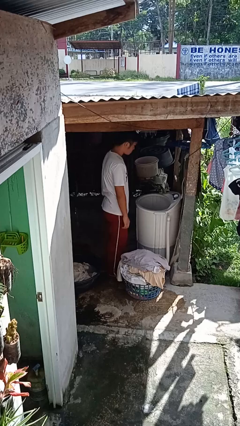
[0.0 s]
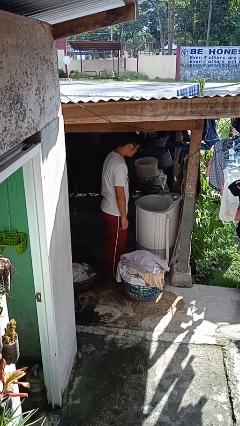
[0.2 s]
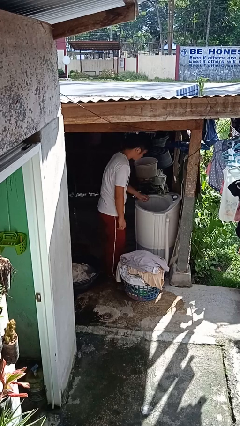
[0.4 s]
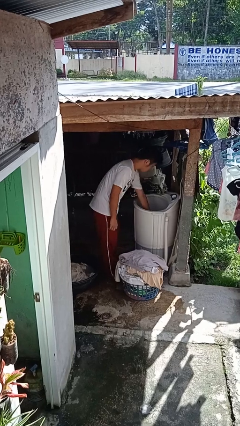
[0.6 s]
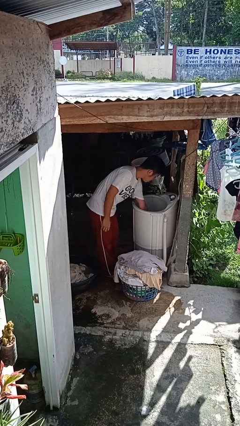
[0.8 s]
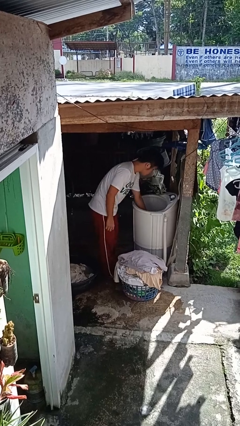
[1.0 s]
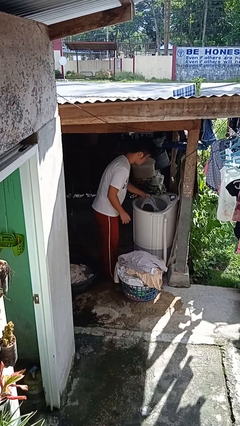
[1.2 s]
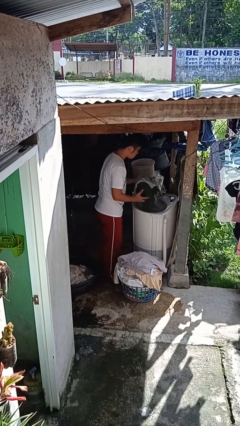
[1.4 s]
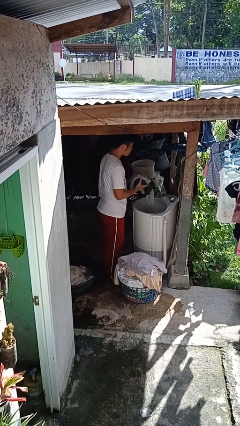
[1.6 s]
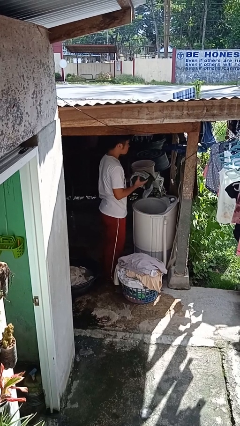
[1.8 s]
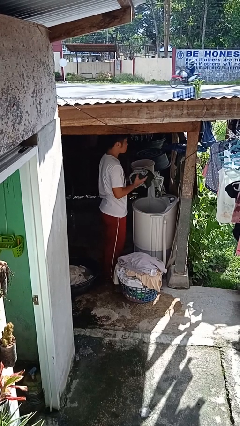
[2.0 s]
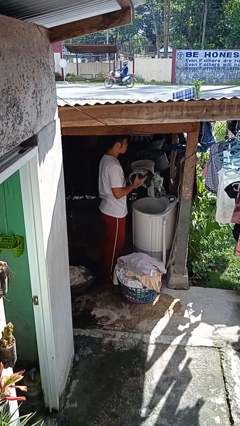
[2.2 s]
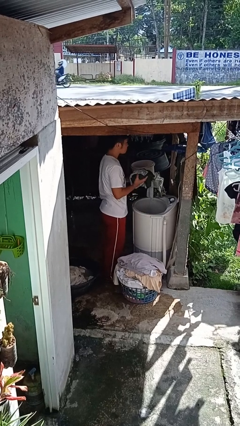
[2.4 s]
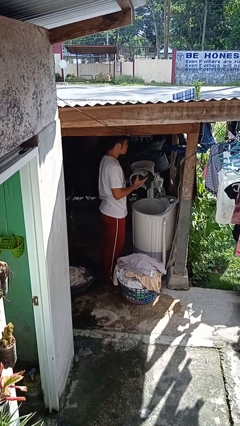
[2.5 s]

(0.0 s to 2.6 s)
person unloads clotheswasher

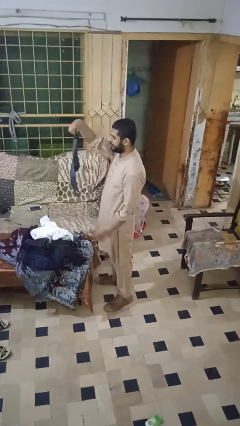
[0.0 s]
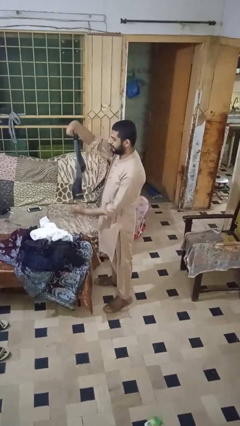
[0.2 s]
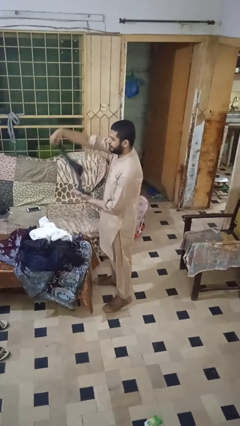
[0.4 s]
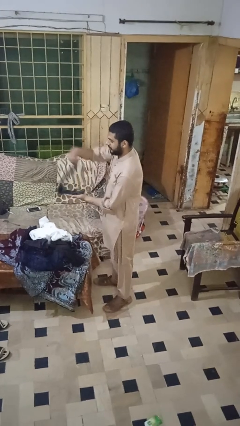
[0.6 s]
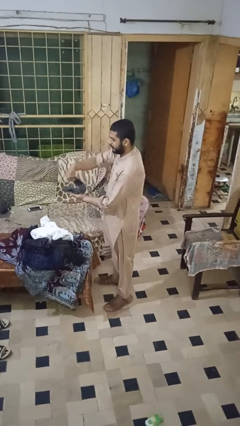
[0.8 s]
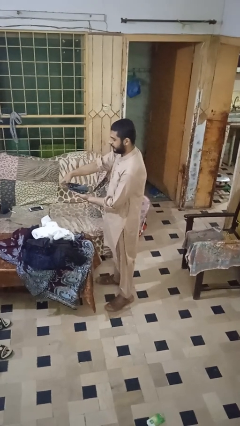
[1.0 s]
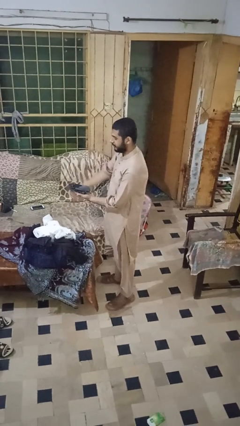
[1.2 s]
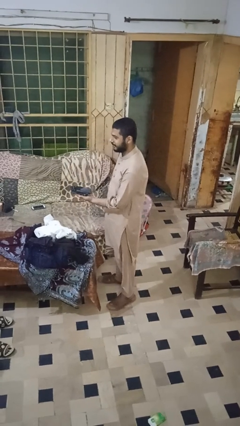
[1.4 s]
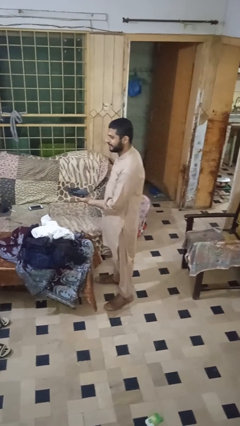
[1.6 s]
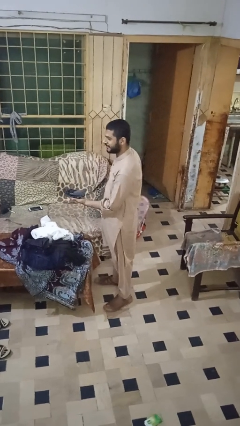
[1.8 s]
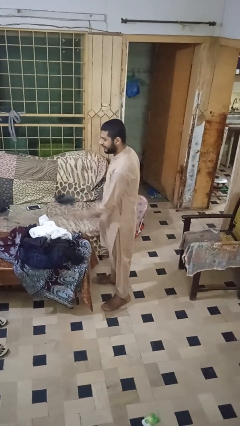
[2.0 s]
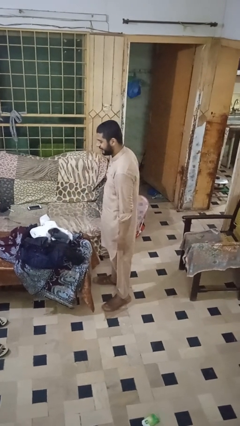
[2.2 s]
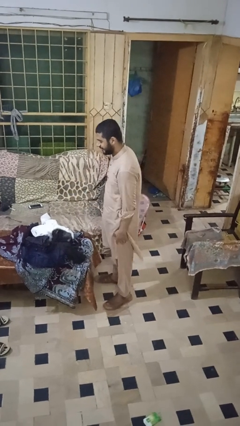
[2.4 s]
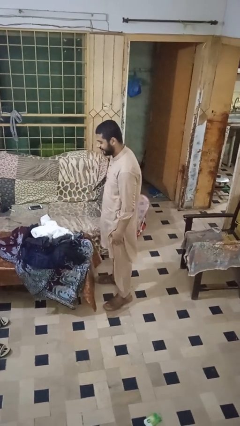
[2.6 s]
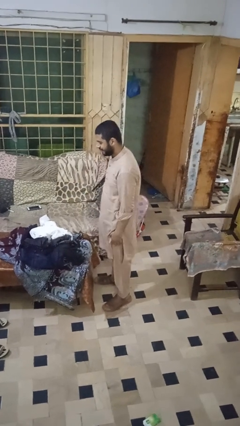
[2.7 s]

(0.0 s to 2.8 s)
person folds socks

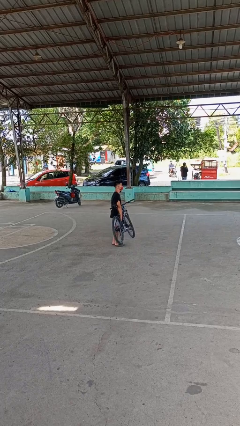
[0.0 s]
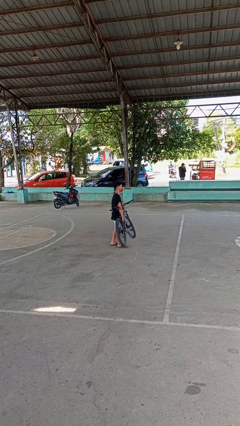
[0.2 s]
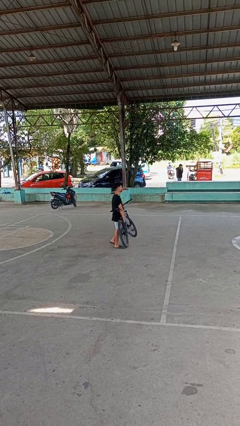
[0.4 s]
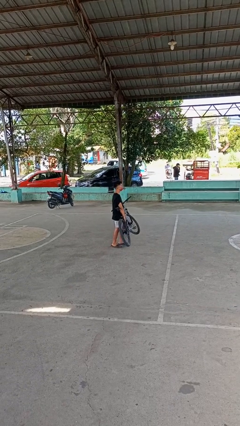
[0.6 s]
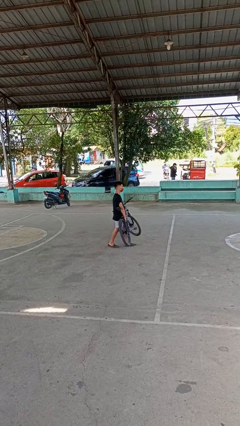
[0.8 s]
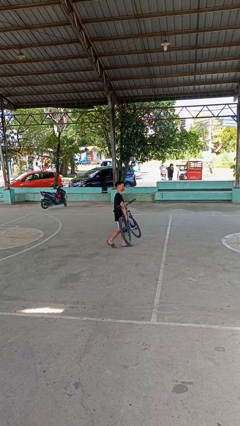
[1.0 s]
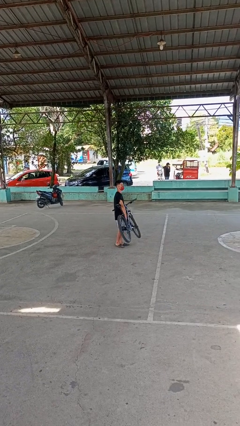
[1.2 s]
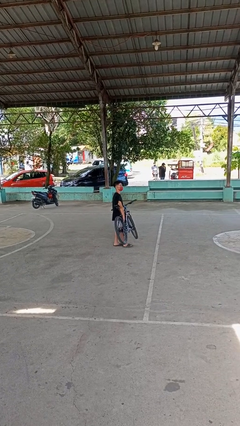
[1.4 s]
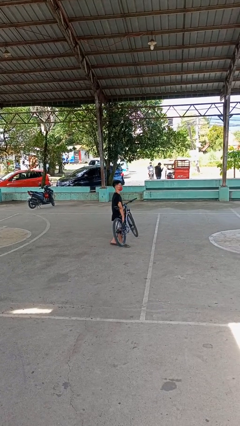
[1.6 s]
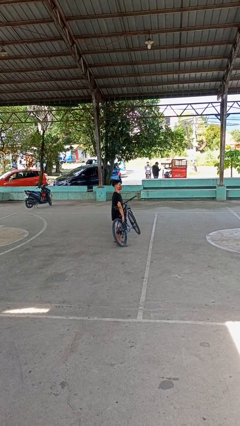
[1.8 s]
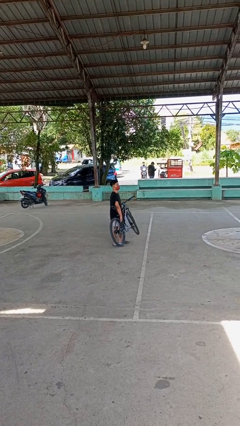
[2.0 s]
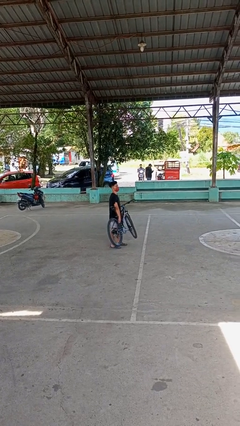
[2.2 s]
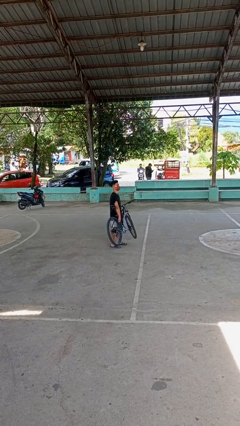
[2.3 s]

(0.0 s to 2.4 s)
person carries bicycle

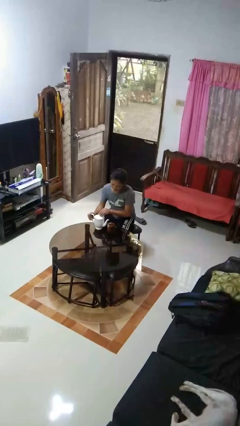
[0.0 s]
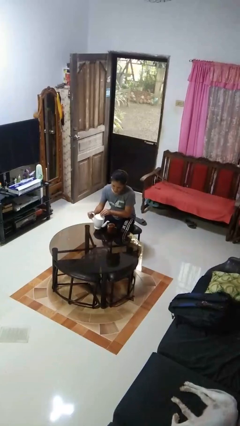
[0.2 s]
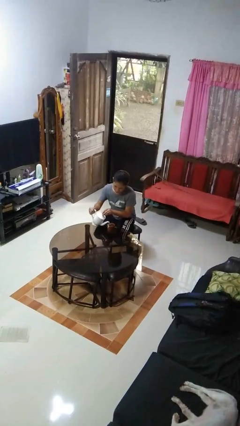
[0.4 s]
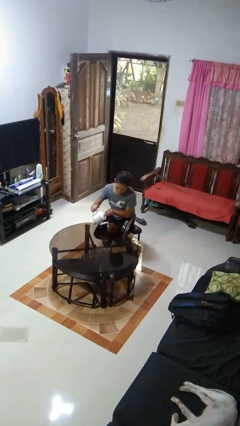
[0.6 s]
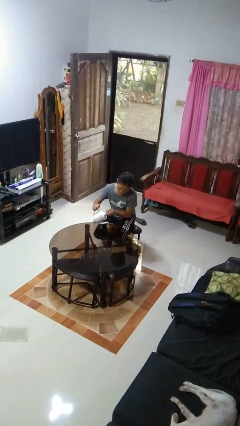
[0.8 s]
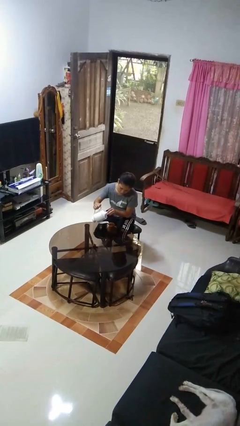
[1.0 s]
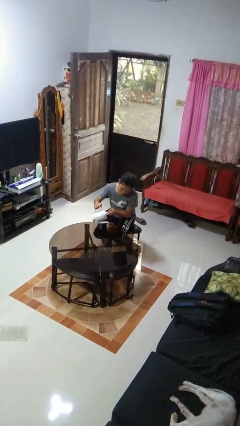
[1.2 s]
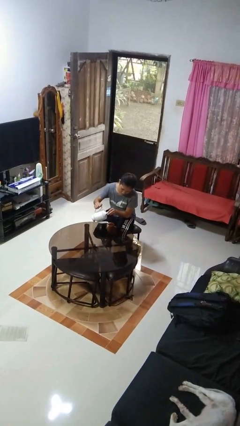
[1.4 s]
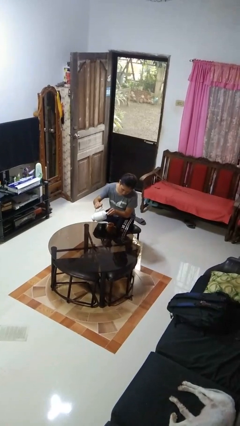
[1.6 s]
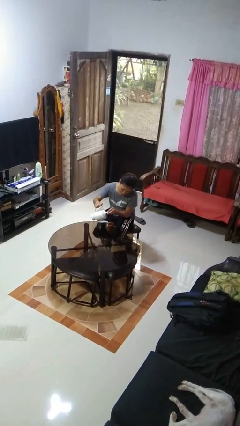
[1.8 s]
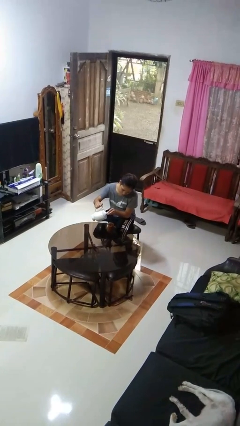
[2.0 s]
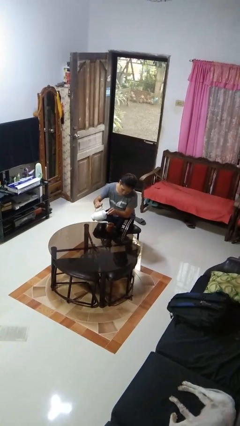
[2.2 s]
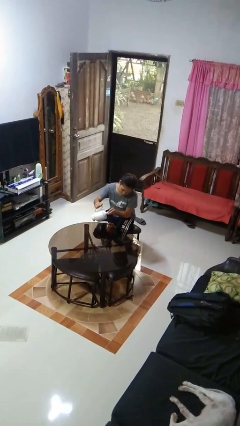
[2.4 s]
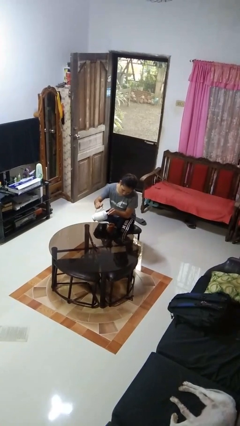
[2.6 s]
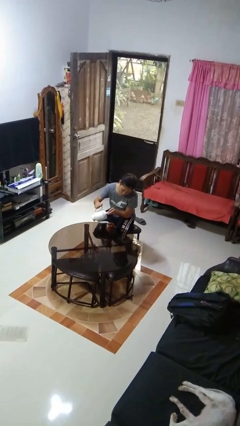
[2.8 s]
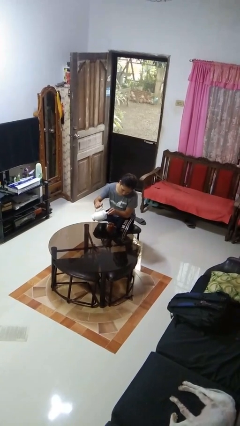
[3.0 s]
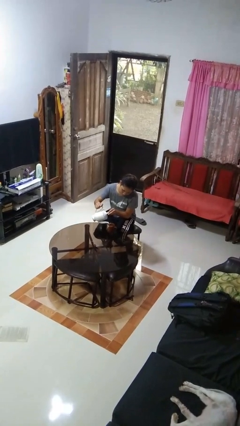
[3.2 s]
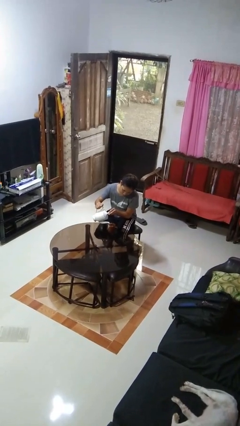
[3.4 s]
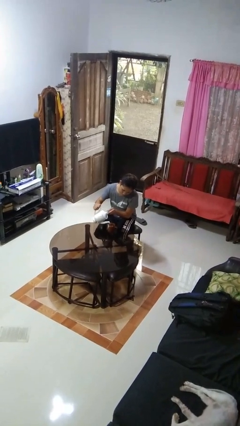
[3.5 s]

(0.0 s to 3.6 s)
person pours coffee into mug

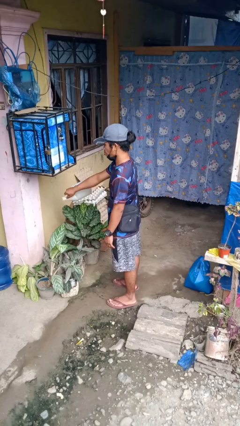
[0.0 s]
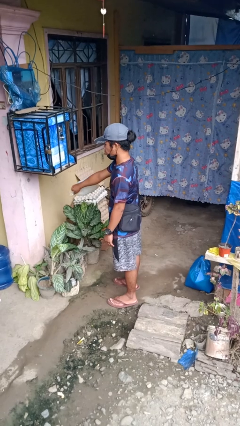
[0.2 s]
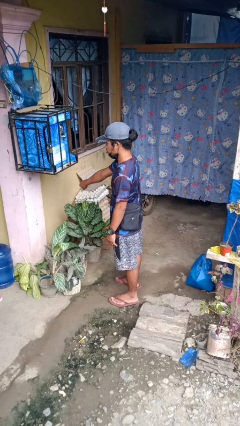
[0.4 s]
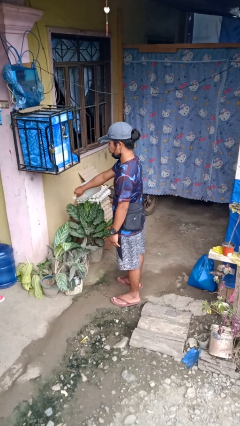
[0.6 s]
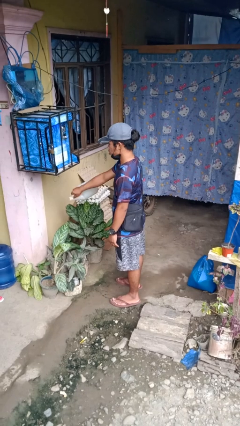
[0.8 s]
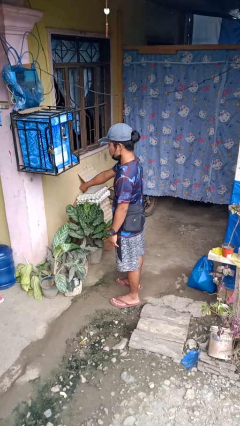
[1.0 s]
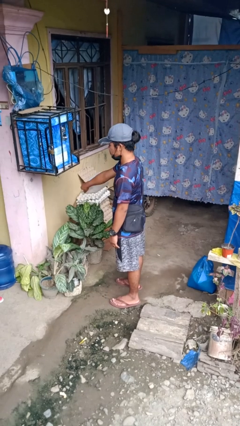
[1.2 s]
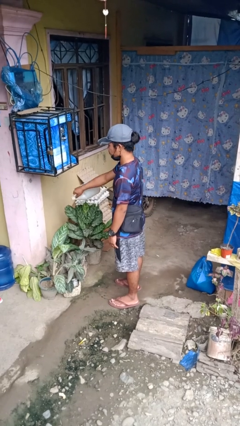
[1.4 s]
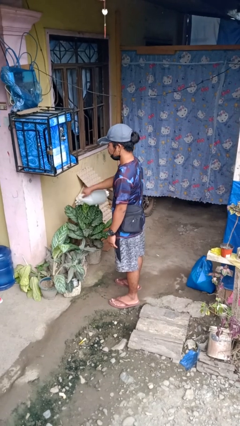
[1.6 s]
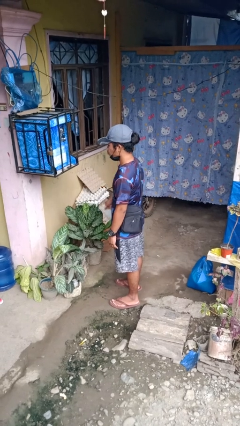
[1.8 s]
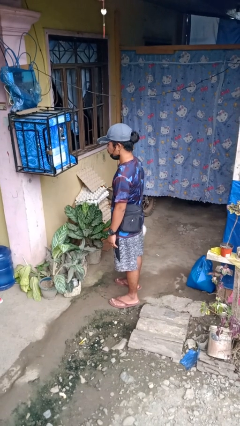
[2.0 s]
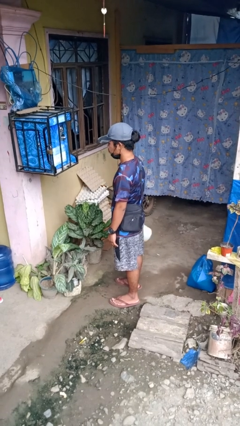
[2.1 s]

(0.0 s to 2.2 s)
person waters houseplant

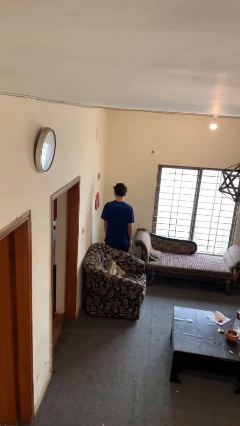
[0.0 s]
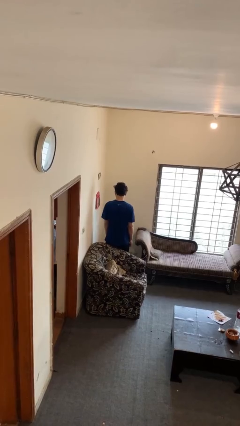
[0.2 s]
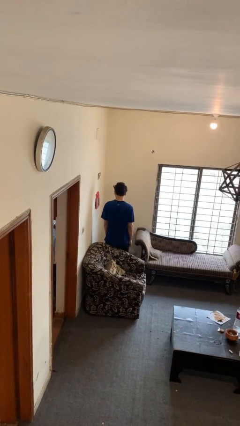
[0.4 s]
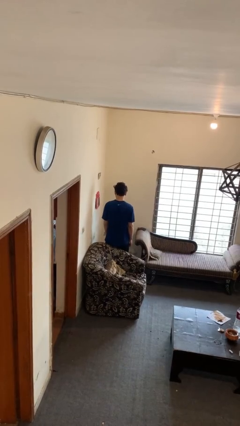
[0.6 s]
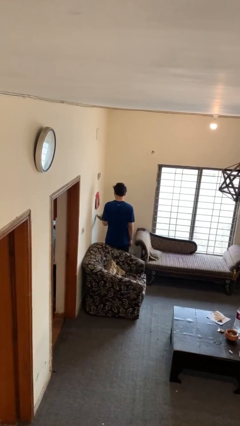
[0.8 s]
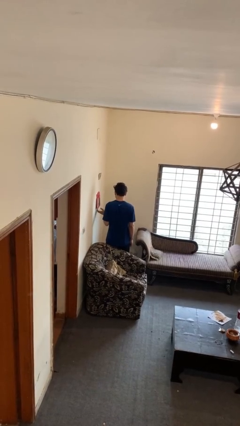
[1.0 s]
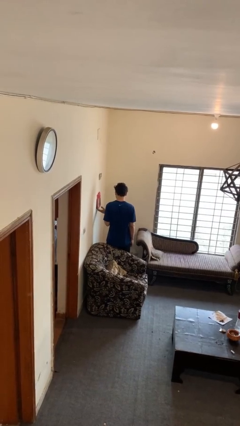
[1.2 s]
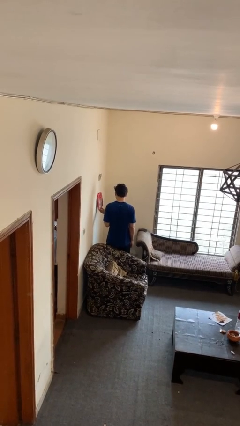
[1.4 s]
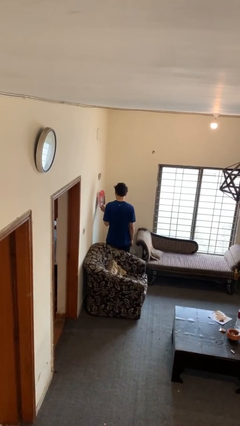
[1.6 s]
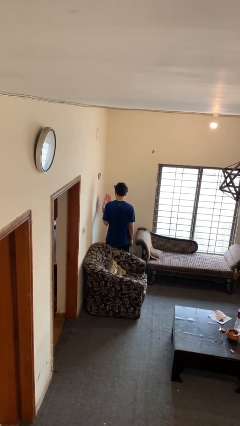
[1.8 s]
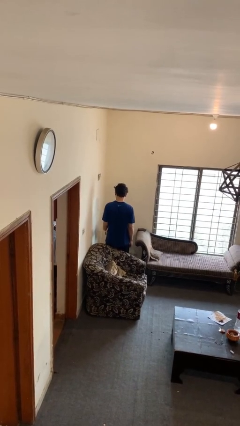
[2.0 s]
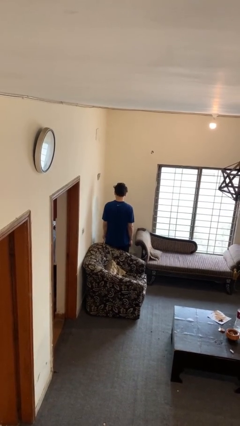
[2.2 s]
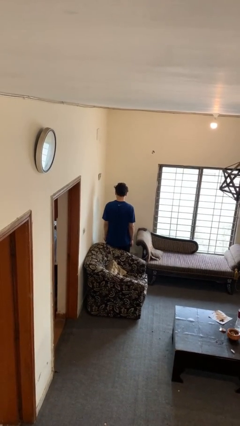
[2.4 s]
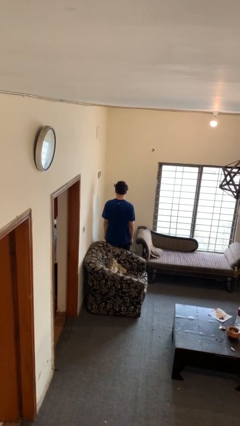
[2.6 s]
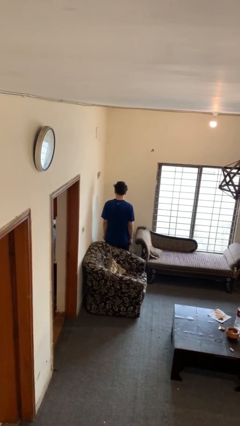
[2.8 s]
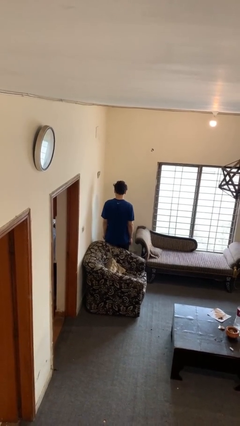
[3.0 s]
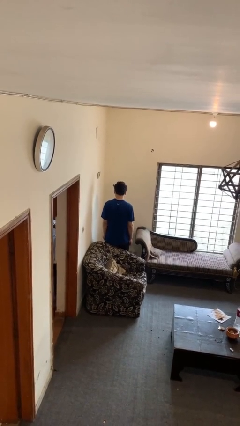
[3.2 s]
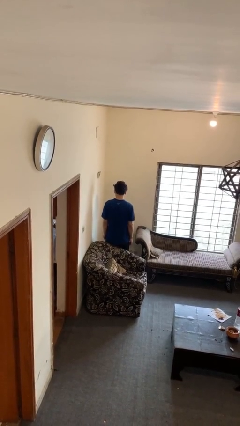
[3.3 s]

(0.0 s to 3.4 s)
person takes down picture frame
